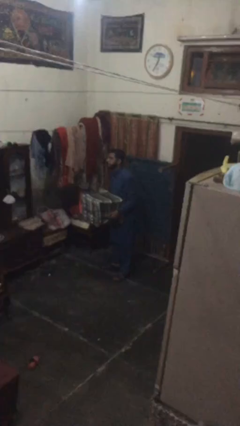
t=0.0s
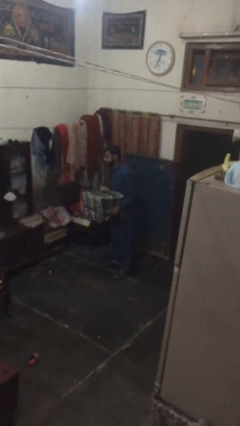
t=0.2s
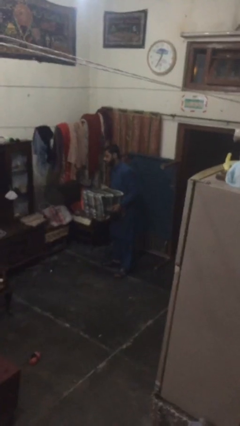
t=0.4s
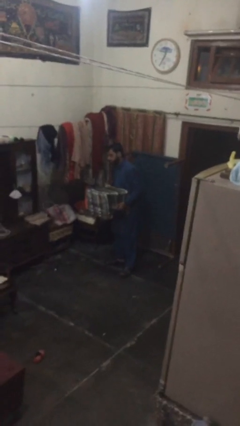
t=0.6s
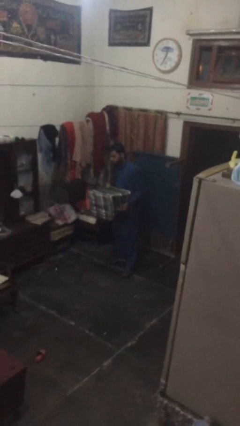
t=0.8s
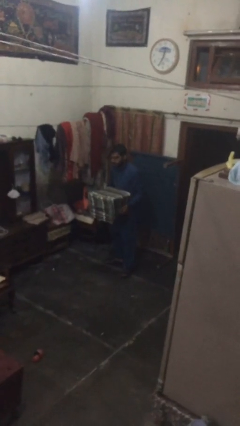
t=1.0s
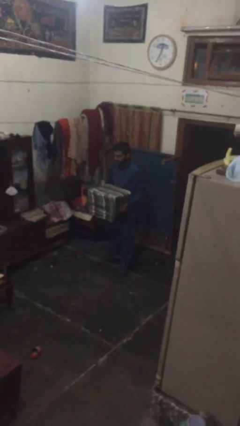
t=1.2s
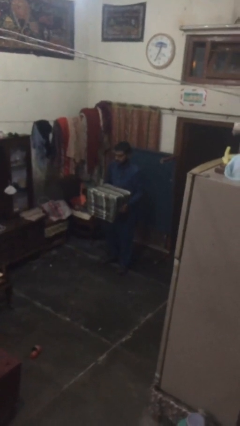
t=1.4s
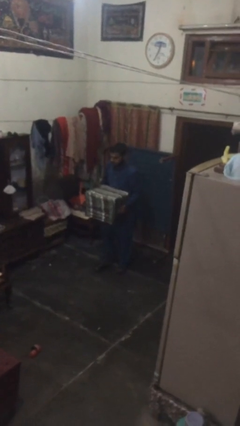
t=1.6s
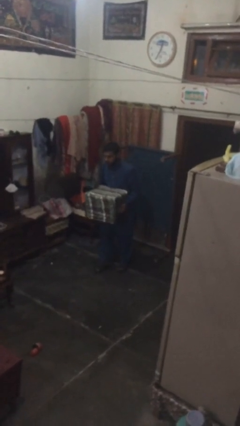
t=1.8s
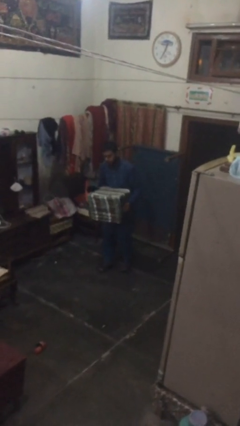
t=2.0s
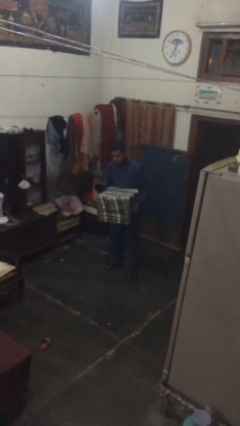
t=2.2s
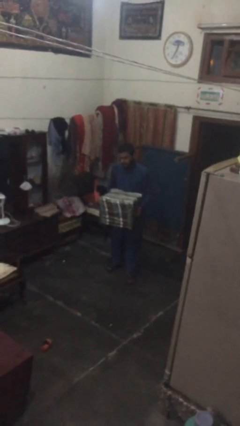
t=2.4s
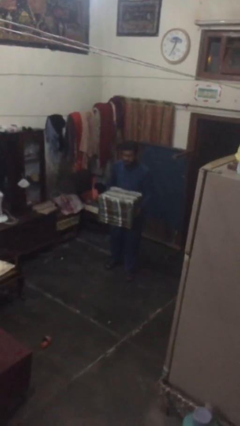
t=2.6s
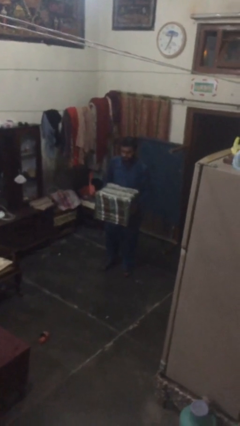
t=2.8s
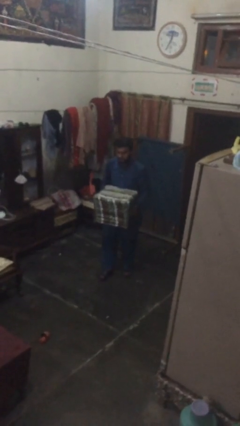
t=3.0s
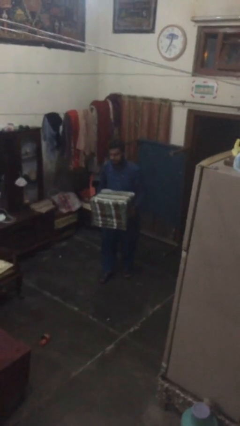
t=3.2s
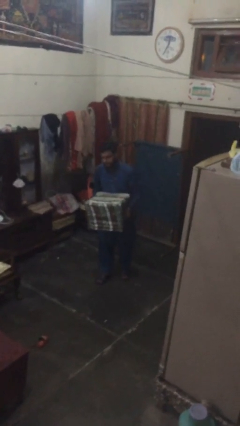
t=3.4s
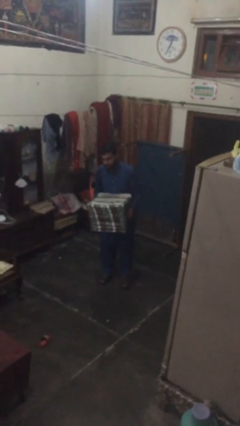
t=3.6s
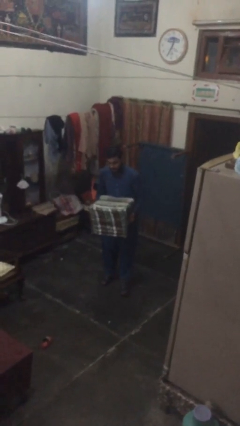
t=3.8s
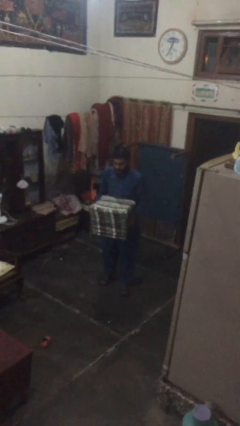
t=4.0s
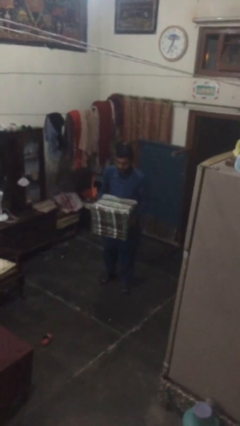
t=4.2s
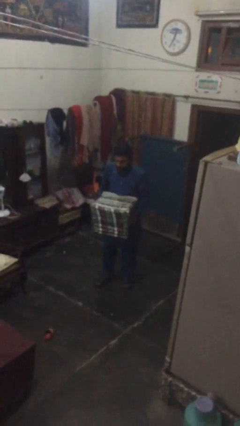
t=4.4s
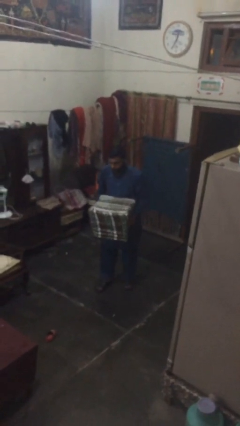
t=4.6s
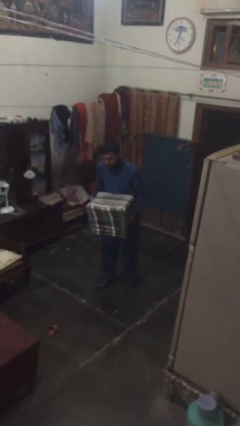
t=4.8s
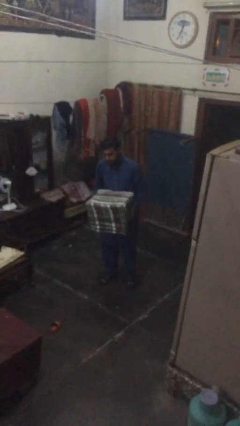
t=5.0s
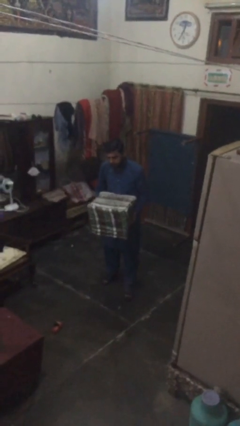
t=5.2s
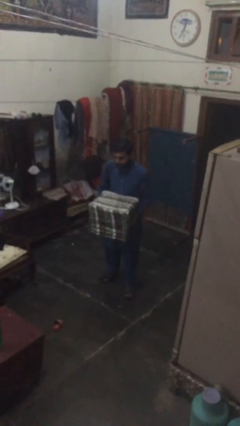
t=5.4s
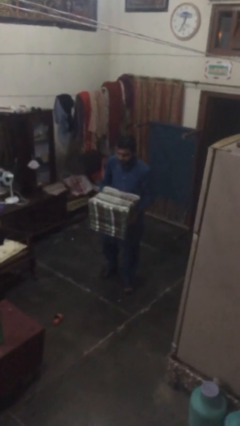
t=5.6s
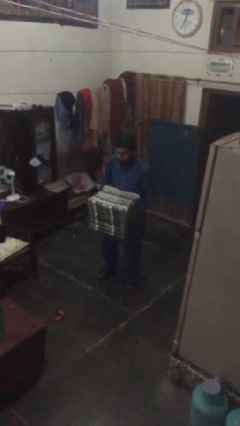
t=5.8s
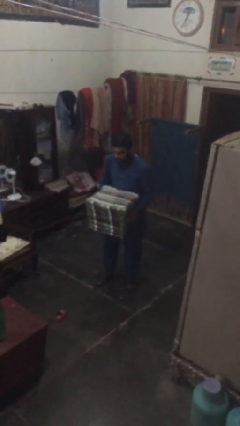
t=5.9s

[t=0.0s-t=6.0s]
person carries heavy object

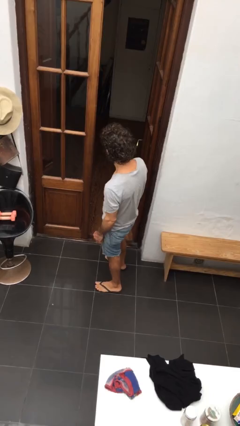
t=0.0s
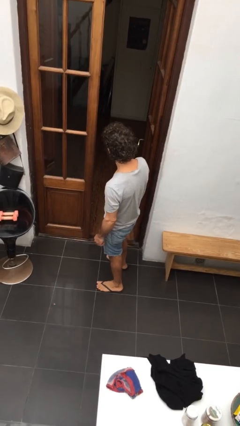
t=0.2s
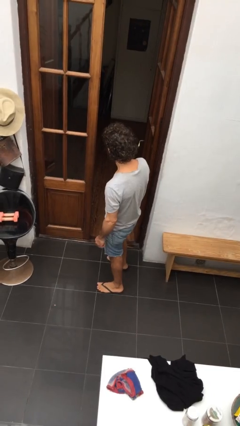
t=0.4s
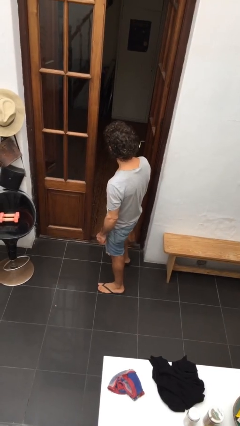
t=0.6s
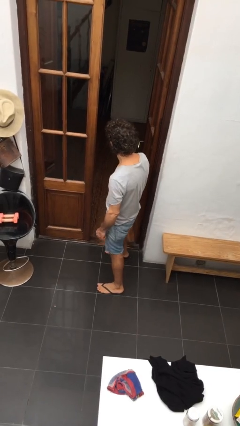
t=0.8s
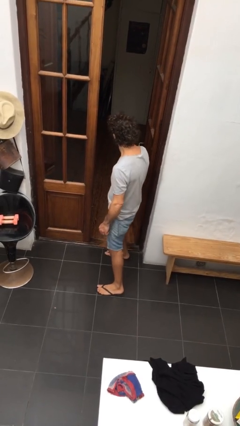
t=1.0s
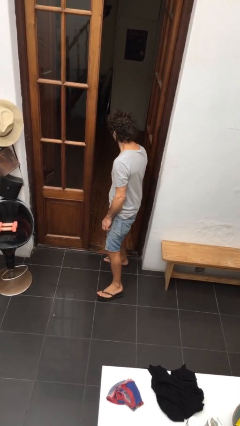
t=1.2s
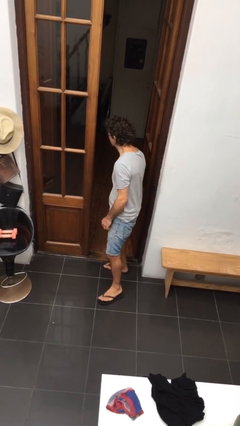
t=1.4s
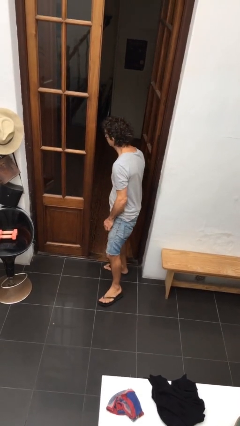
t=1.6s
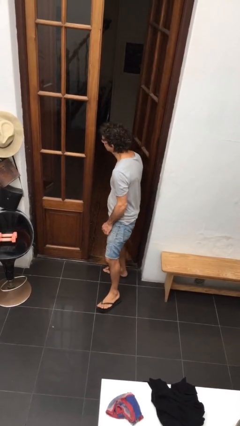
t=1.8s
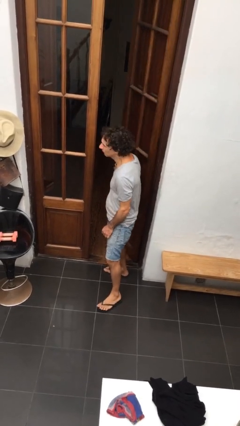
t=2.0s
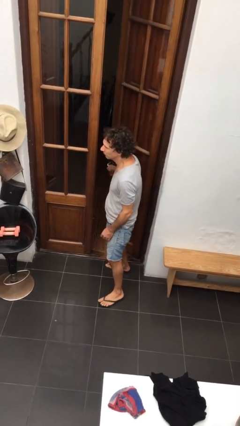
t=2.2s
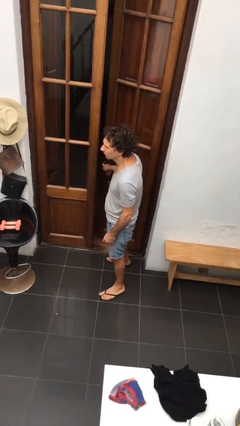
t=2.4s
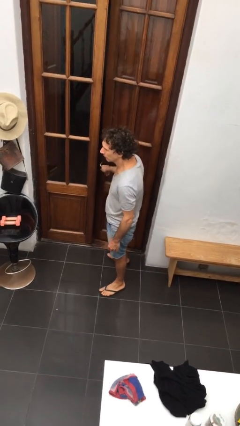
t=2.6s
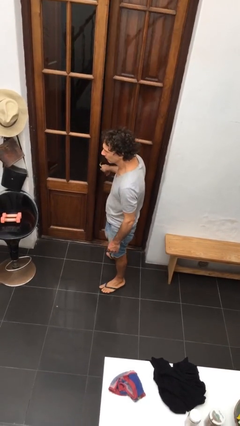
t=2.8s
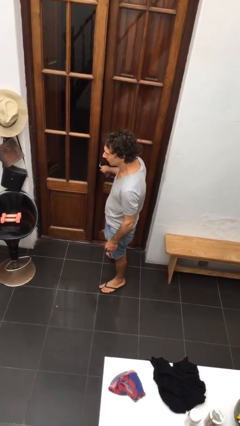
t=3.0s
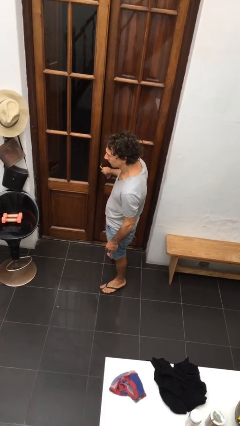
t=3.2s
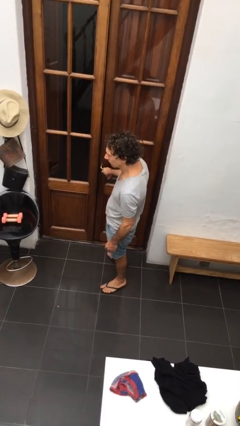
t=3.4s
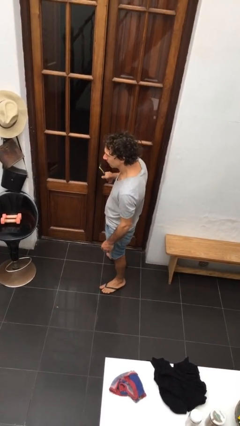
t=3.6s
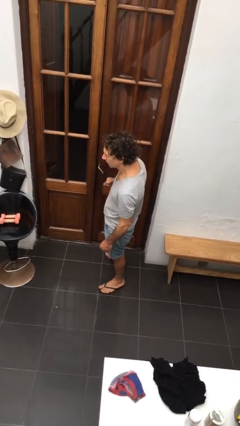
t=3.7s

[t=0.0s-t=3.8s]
person closes facility door

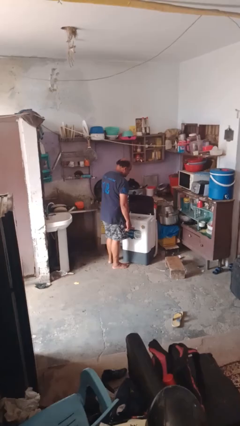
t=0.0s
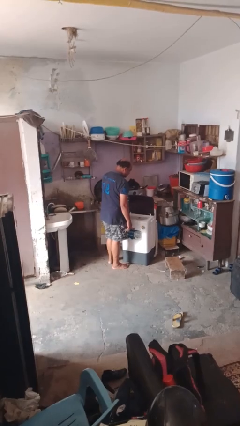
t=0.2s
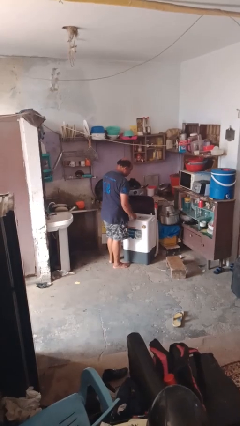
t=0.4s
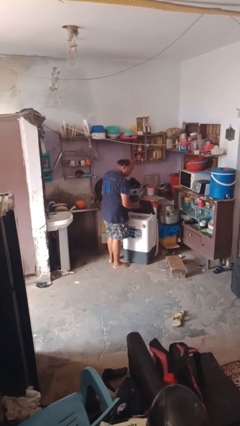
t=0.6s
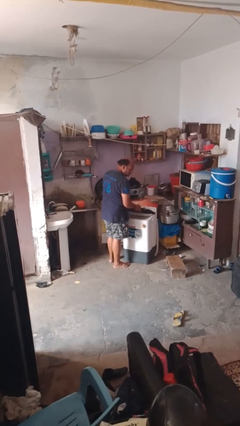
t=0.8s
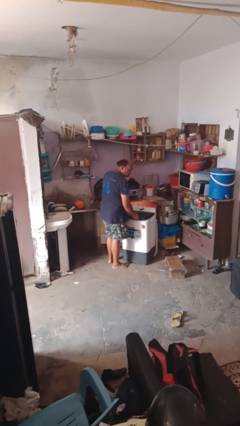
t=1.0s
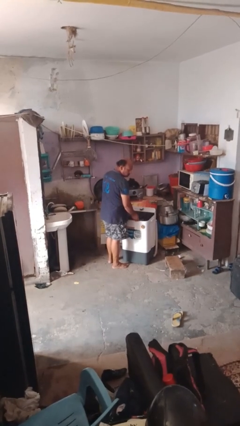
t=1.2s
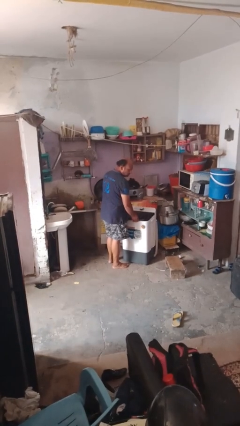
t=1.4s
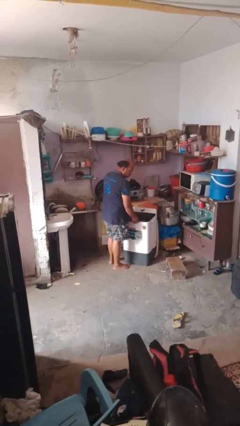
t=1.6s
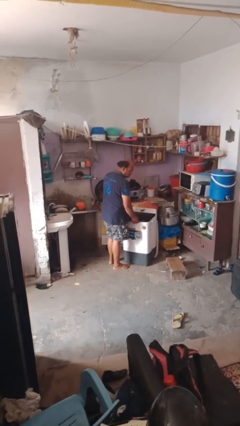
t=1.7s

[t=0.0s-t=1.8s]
person closes clothes washer

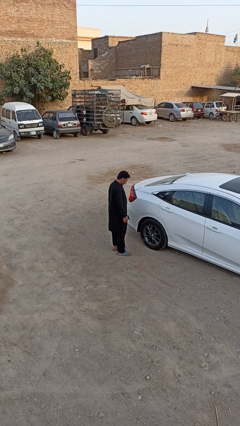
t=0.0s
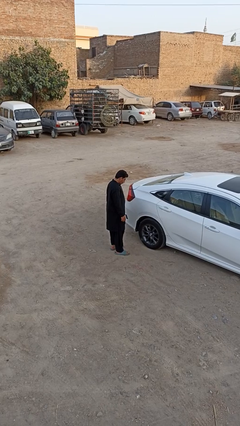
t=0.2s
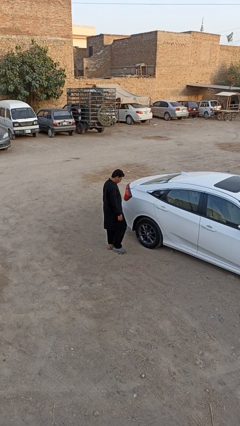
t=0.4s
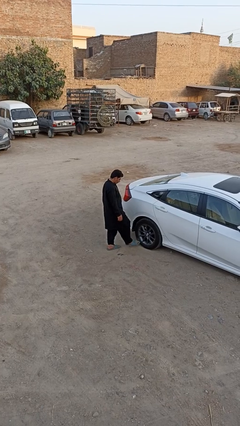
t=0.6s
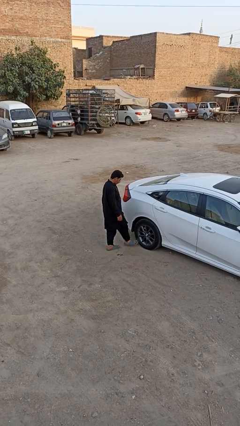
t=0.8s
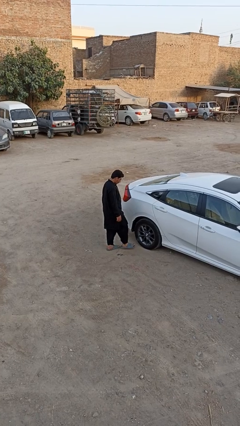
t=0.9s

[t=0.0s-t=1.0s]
person kicks car tires

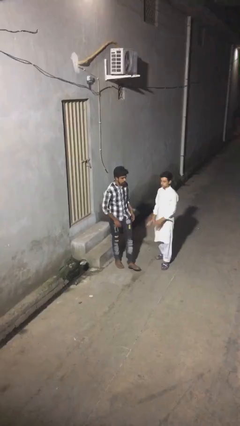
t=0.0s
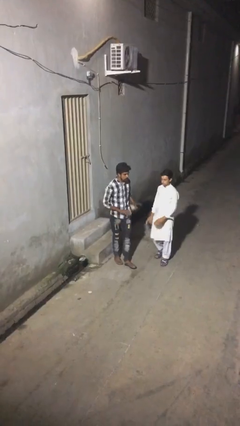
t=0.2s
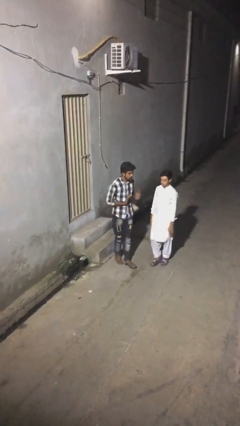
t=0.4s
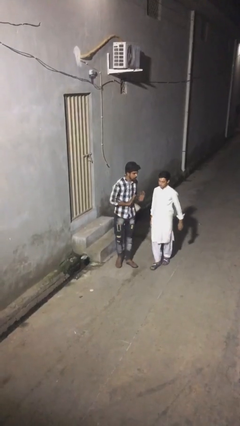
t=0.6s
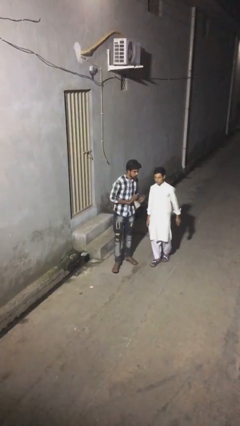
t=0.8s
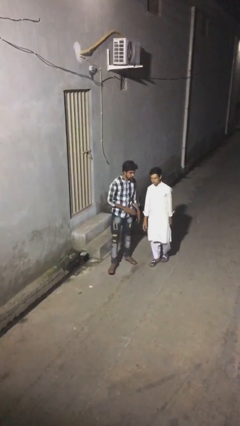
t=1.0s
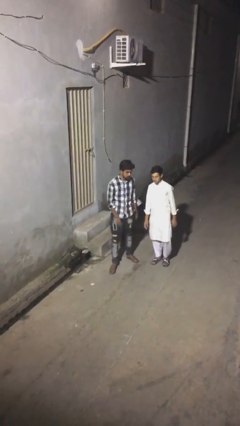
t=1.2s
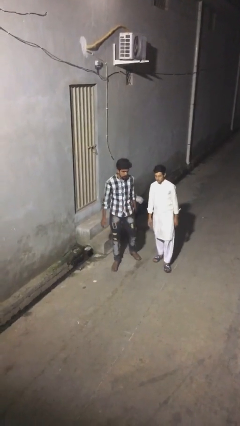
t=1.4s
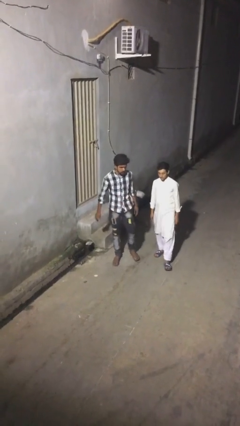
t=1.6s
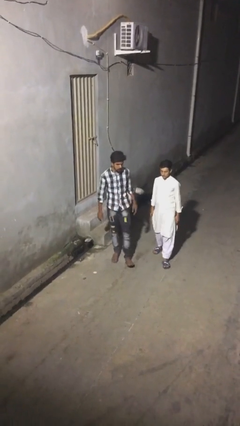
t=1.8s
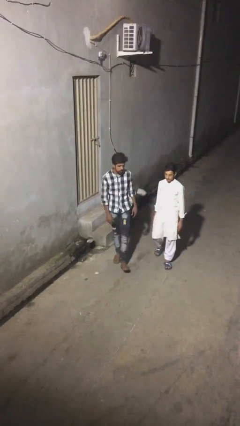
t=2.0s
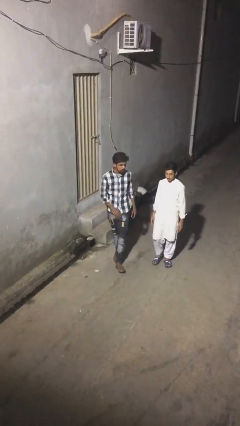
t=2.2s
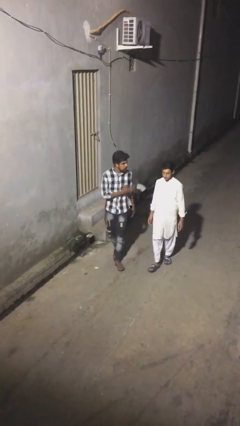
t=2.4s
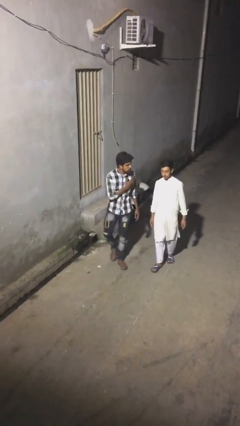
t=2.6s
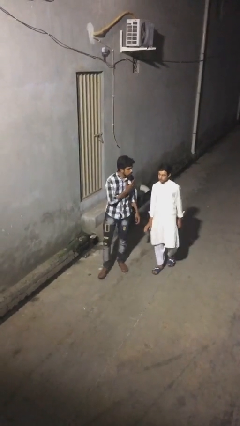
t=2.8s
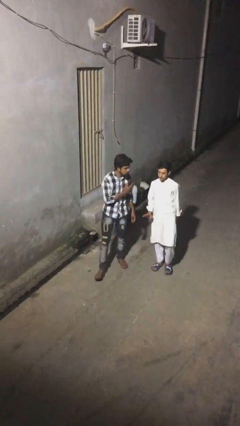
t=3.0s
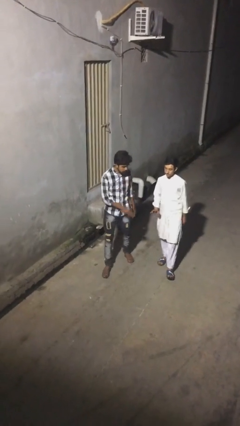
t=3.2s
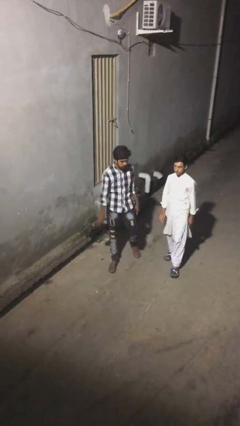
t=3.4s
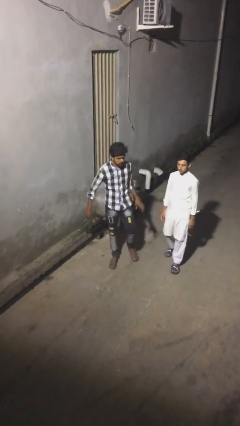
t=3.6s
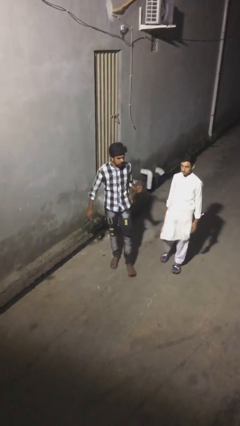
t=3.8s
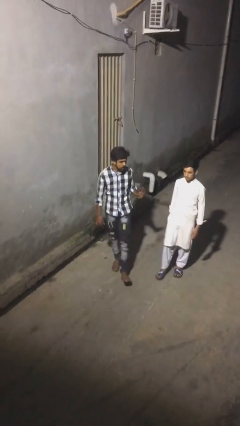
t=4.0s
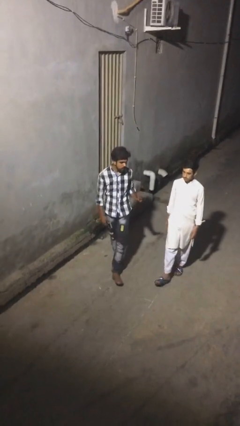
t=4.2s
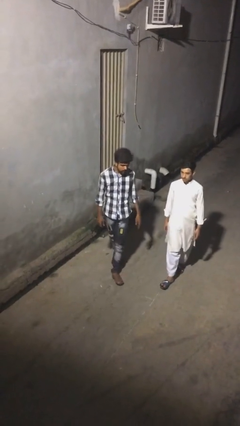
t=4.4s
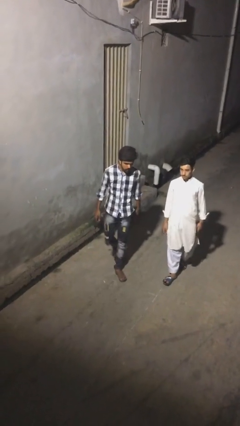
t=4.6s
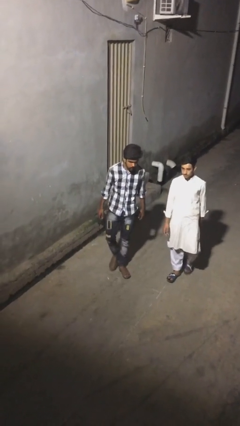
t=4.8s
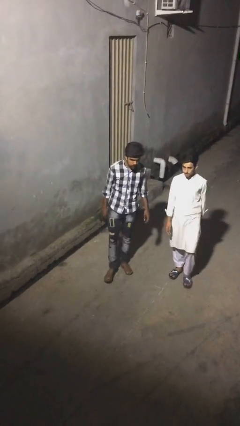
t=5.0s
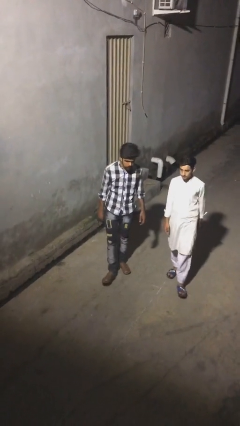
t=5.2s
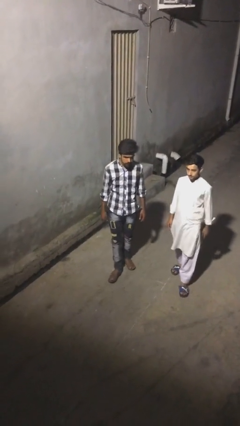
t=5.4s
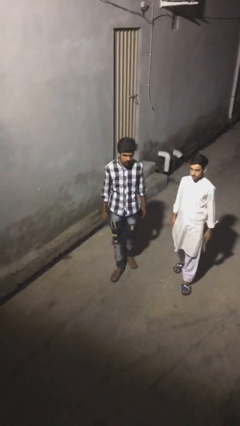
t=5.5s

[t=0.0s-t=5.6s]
person talks to person
